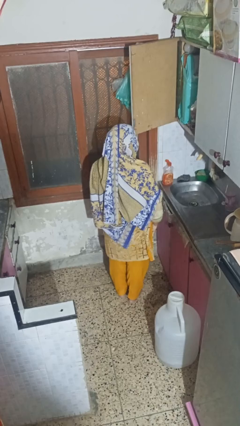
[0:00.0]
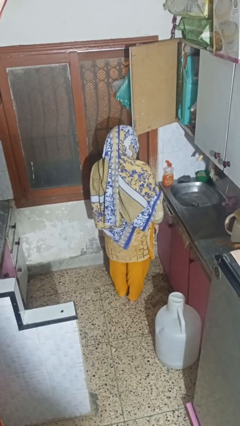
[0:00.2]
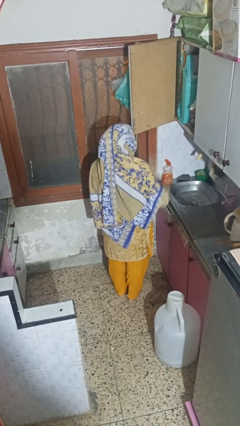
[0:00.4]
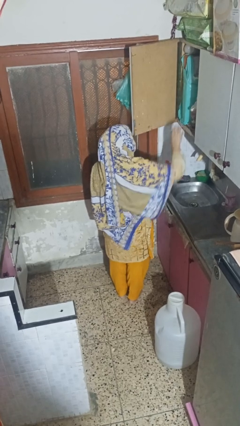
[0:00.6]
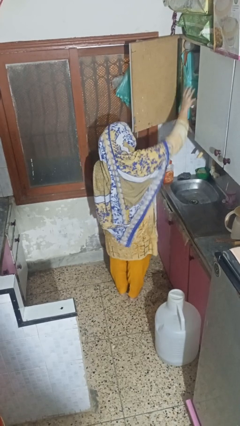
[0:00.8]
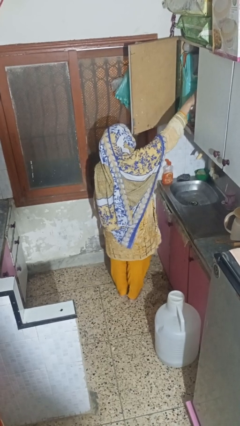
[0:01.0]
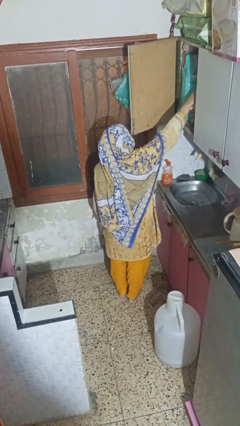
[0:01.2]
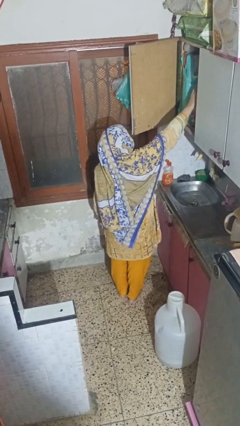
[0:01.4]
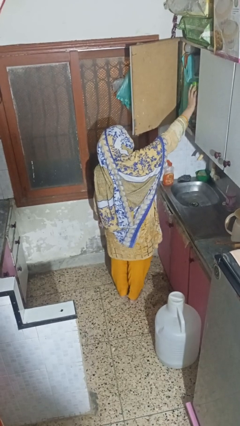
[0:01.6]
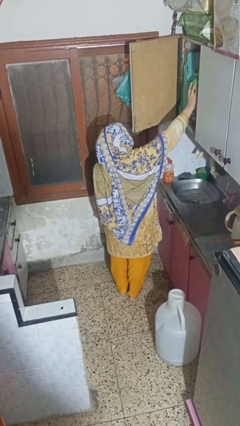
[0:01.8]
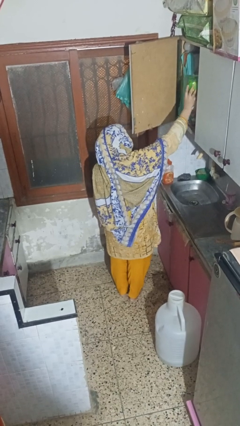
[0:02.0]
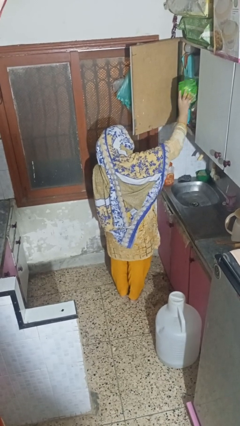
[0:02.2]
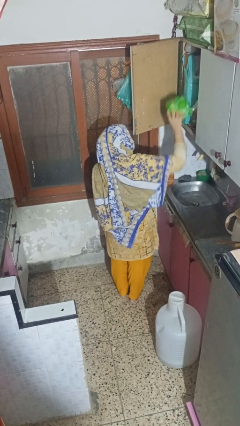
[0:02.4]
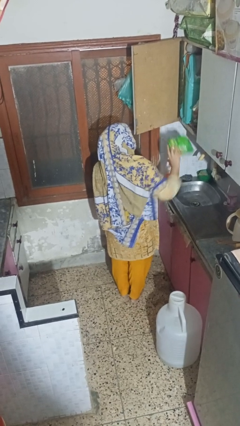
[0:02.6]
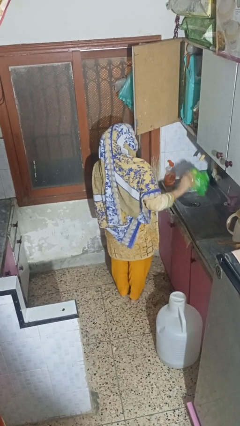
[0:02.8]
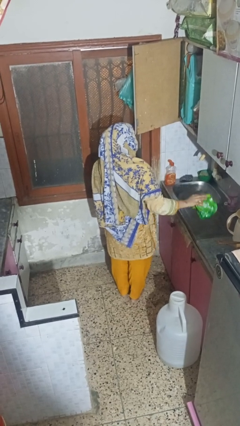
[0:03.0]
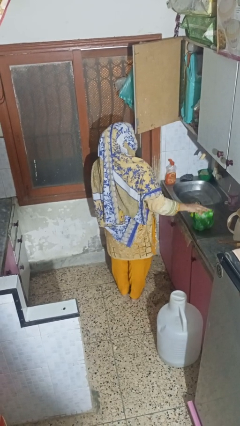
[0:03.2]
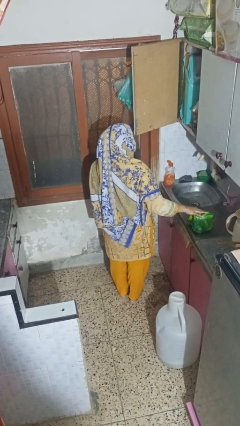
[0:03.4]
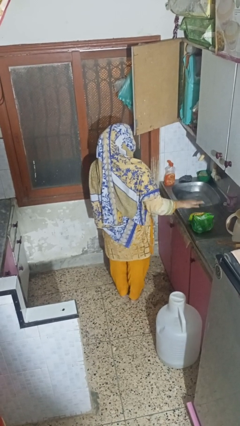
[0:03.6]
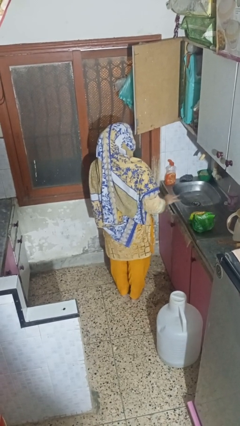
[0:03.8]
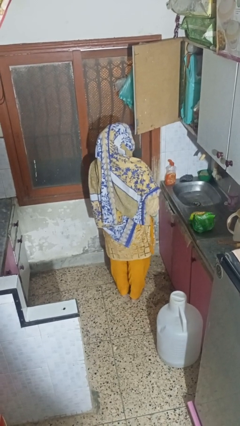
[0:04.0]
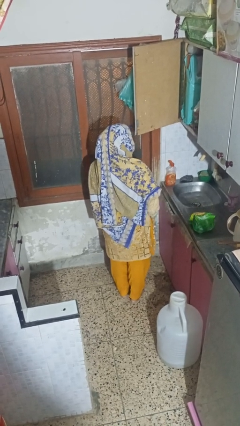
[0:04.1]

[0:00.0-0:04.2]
person takes object from cabinet

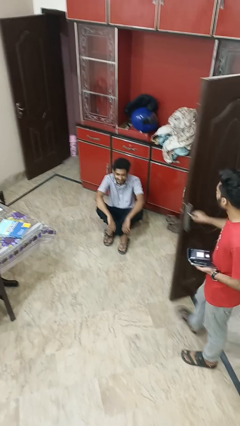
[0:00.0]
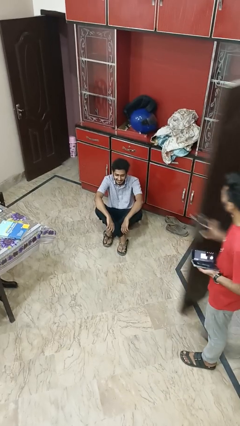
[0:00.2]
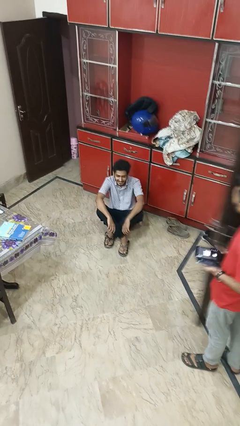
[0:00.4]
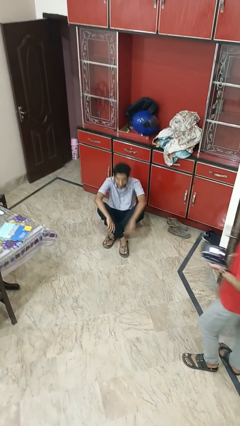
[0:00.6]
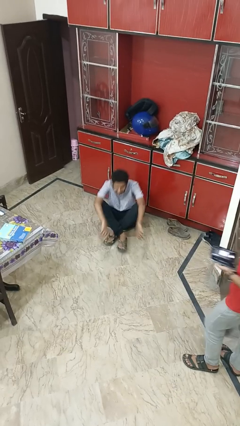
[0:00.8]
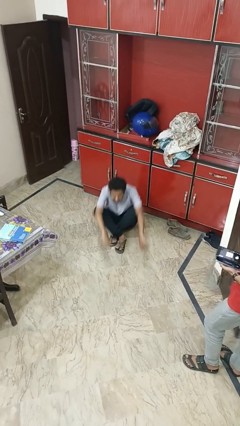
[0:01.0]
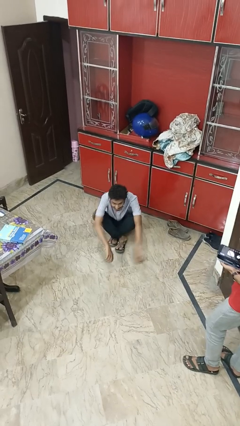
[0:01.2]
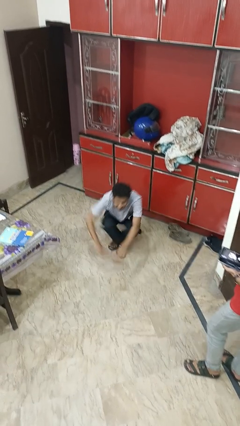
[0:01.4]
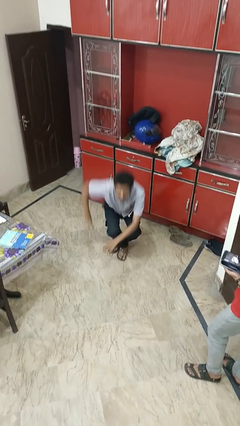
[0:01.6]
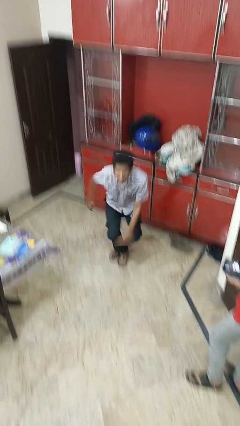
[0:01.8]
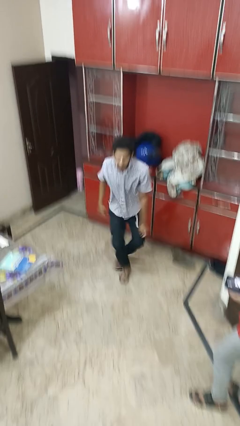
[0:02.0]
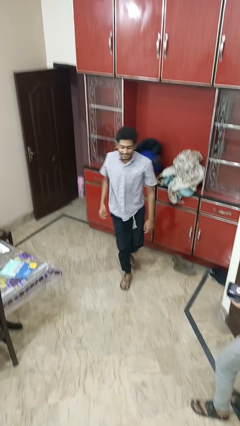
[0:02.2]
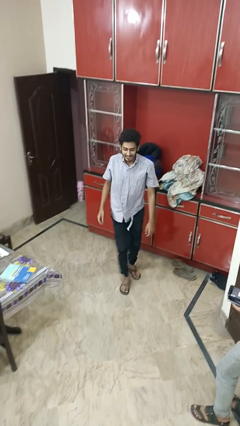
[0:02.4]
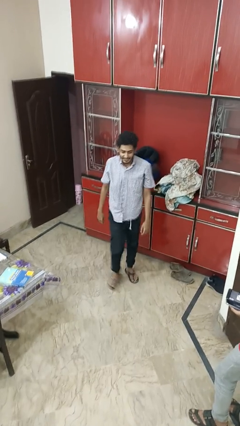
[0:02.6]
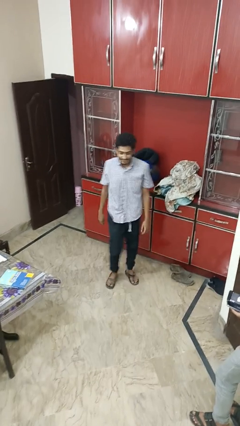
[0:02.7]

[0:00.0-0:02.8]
person stands up from floor

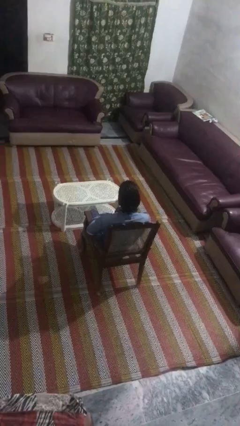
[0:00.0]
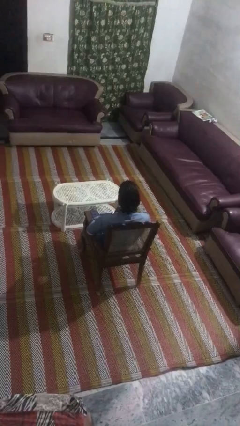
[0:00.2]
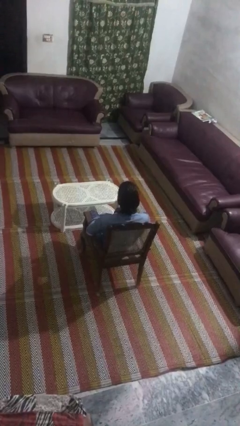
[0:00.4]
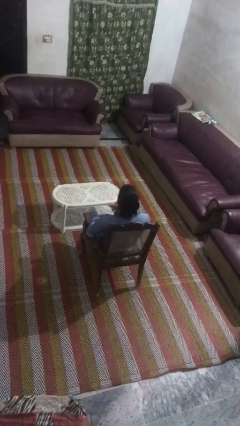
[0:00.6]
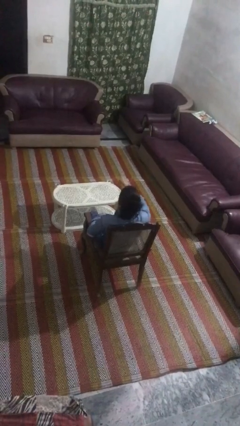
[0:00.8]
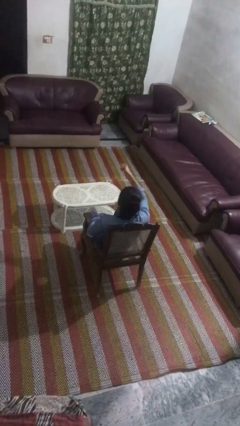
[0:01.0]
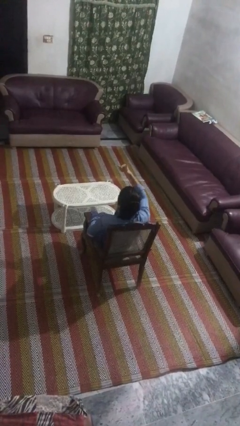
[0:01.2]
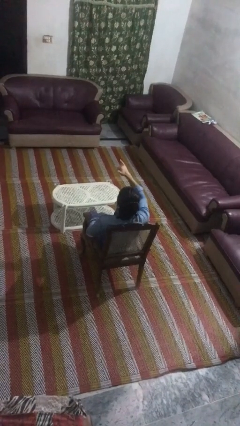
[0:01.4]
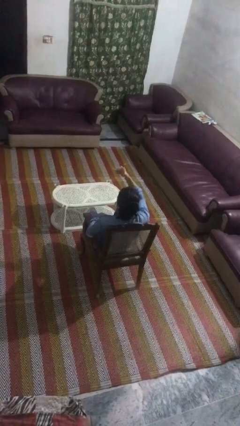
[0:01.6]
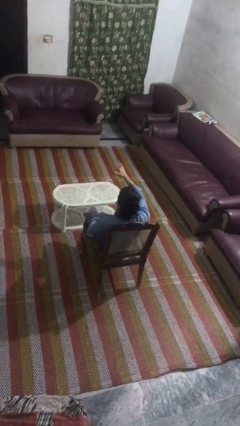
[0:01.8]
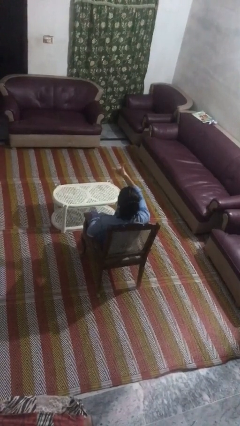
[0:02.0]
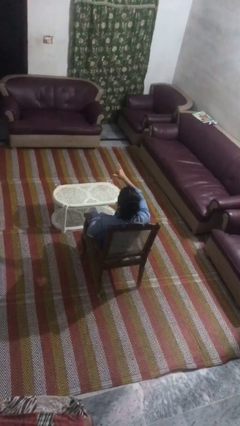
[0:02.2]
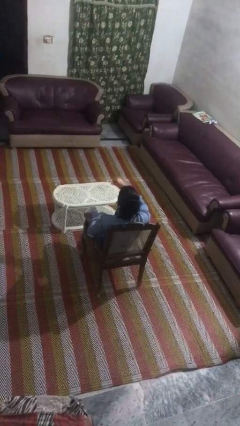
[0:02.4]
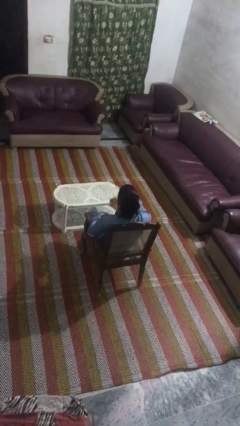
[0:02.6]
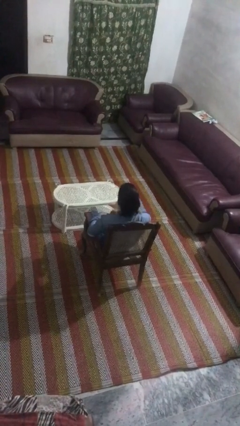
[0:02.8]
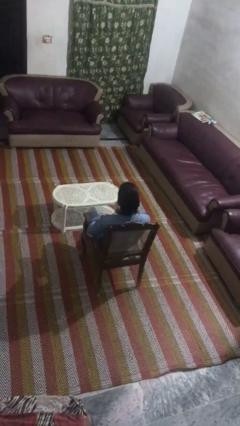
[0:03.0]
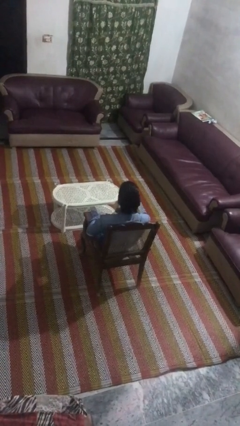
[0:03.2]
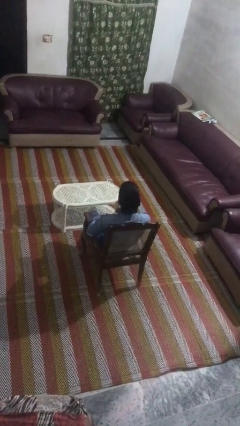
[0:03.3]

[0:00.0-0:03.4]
person gestures hang loose

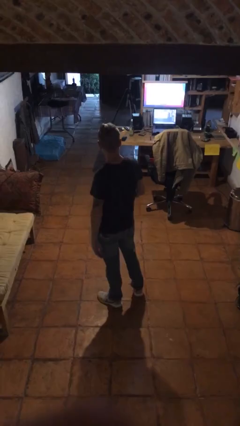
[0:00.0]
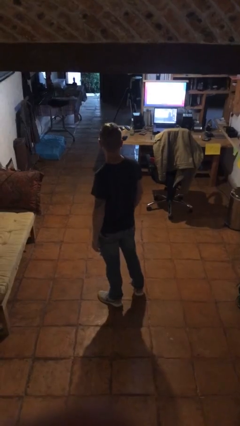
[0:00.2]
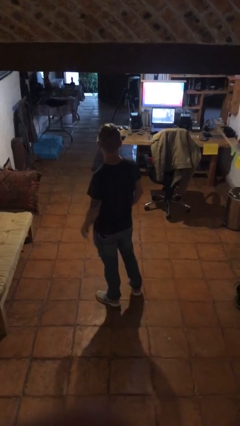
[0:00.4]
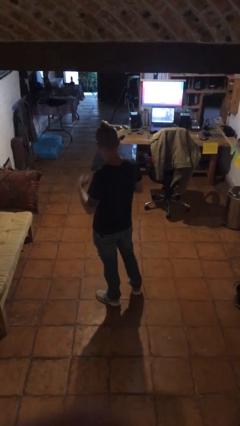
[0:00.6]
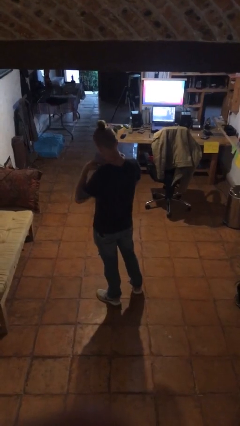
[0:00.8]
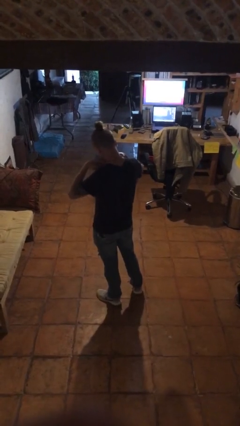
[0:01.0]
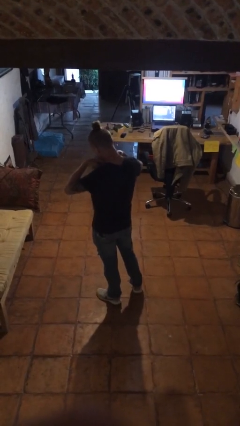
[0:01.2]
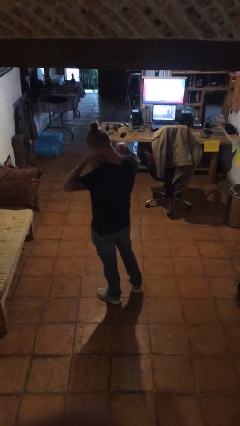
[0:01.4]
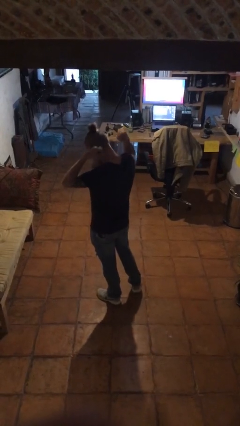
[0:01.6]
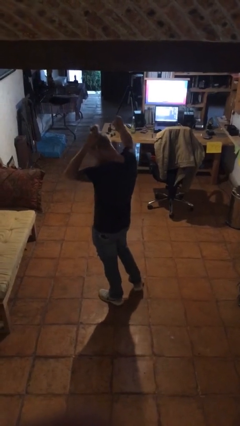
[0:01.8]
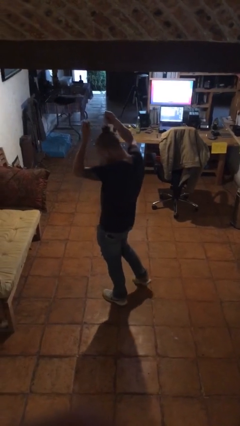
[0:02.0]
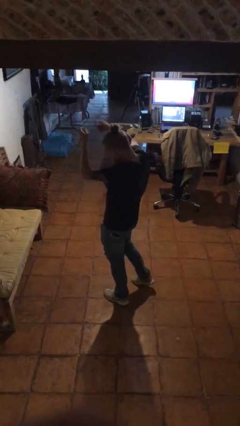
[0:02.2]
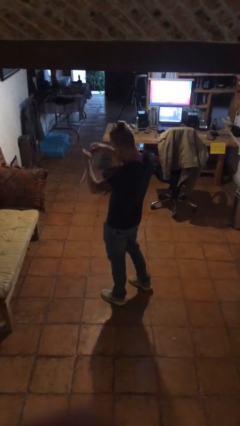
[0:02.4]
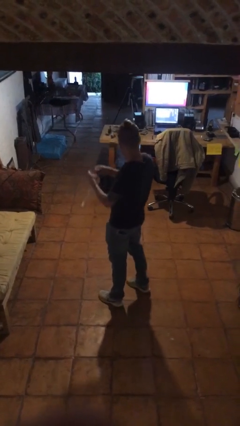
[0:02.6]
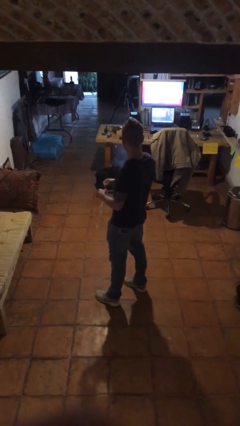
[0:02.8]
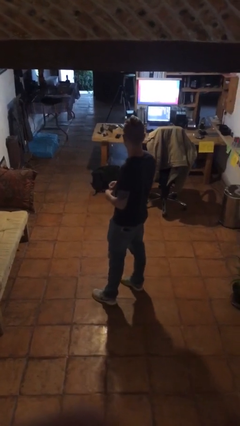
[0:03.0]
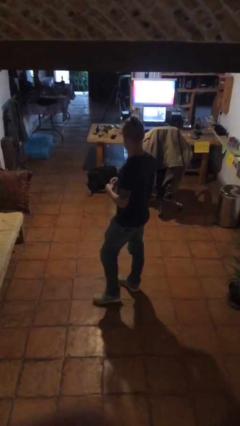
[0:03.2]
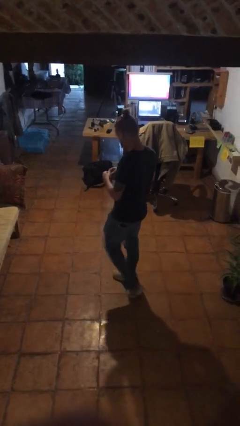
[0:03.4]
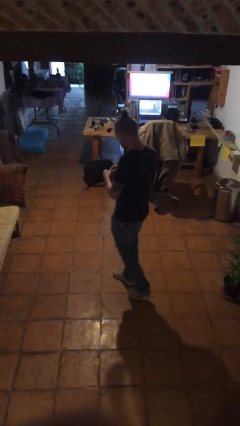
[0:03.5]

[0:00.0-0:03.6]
person takes off necklace

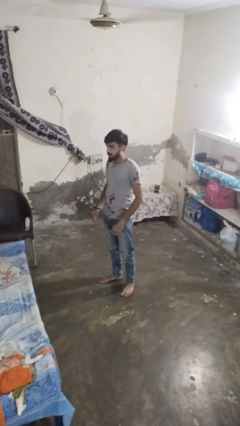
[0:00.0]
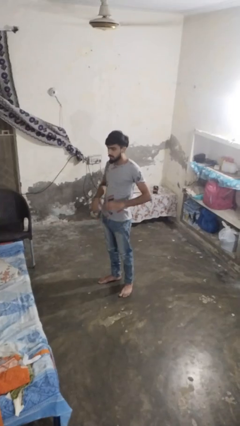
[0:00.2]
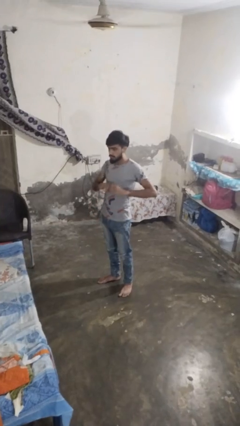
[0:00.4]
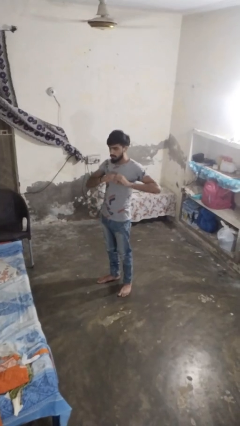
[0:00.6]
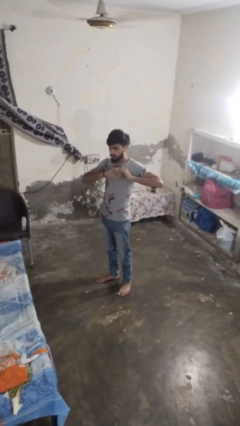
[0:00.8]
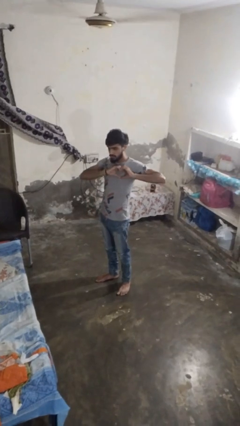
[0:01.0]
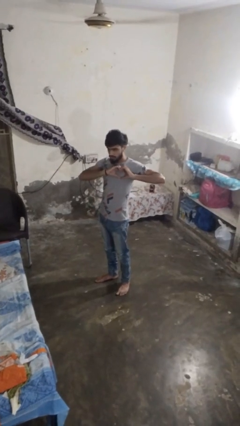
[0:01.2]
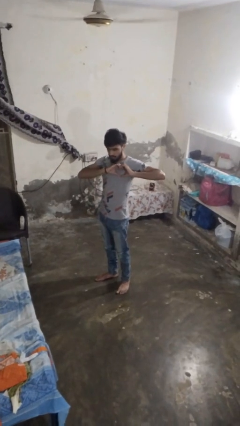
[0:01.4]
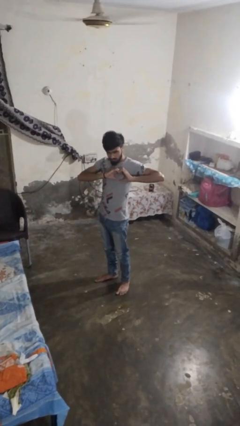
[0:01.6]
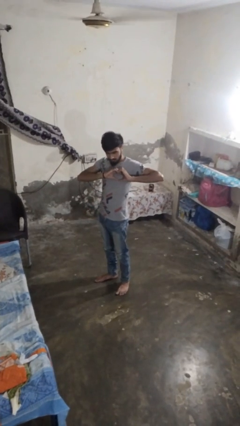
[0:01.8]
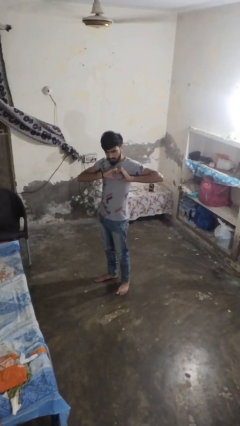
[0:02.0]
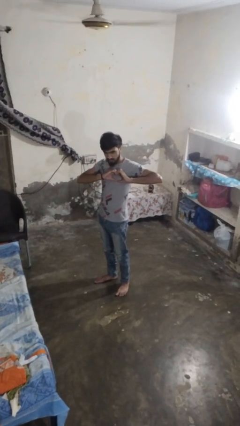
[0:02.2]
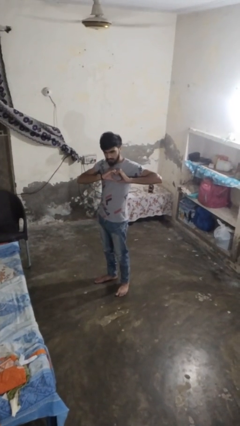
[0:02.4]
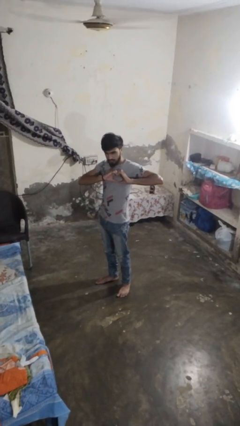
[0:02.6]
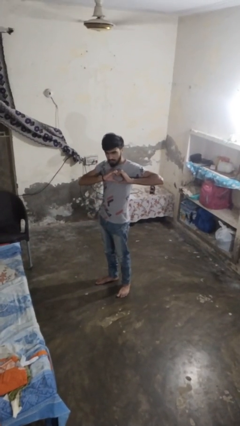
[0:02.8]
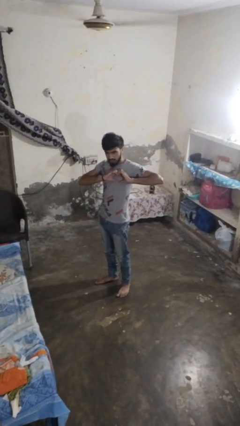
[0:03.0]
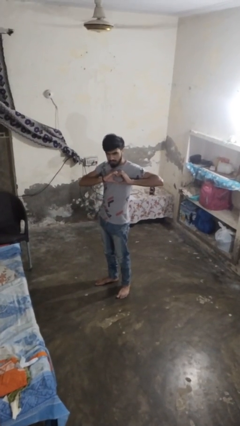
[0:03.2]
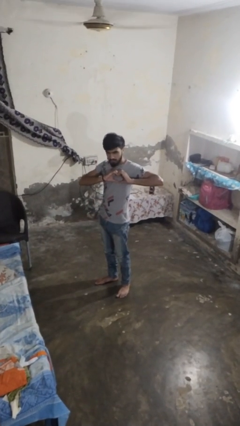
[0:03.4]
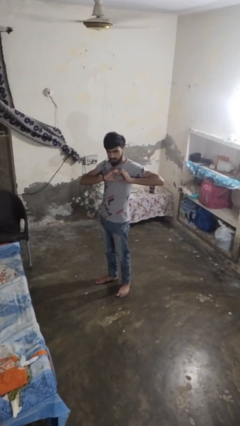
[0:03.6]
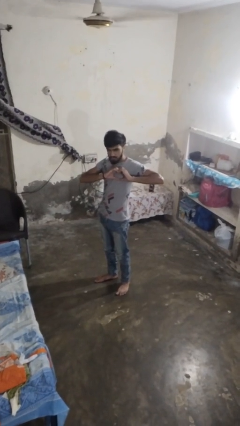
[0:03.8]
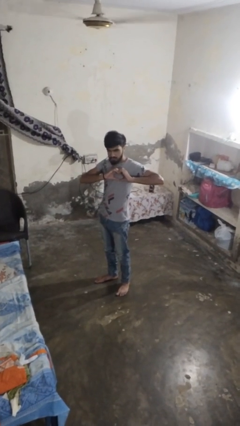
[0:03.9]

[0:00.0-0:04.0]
person gestures heart
